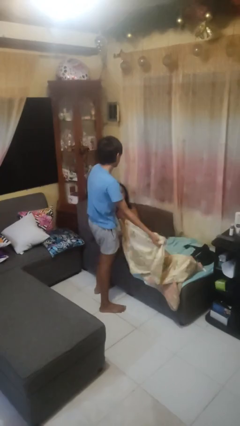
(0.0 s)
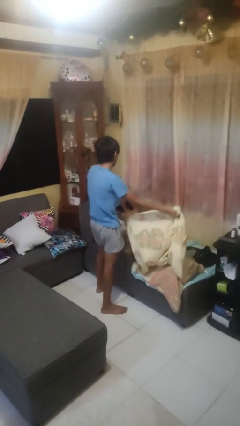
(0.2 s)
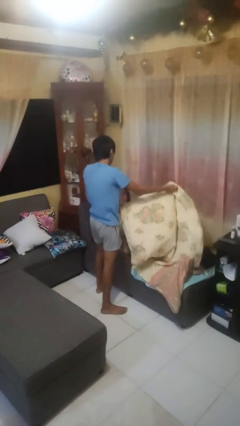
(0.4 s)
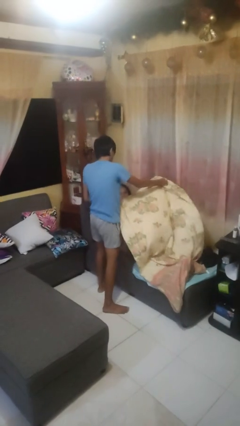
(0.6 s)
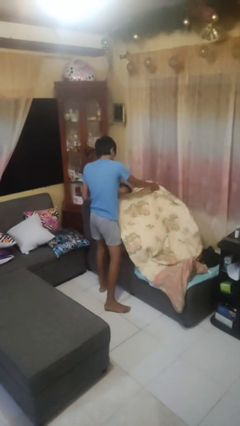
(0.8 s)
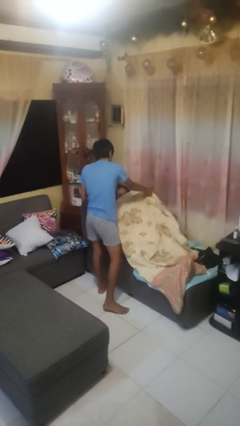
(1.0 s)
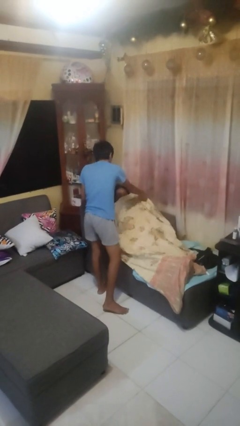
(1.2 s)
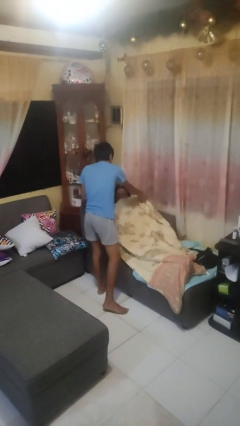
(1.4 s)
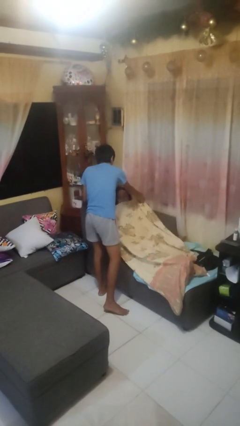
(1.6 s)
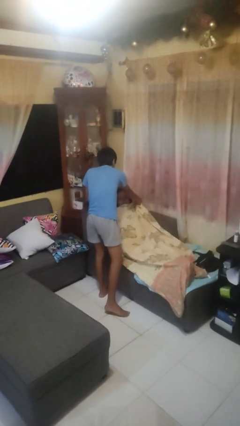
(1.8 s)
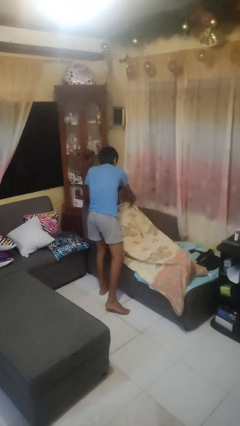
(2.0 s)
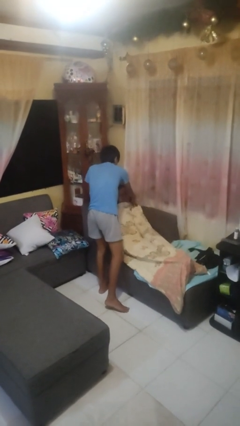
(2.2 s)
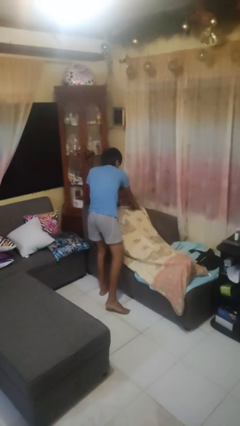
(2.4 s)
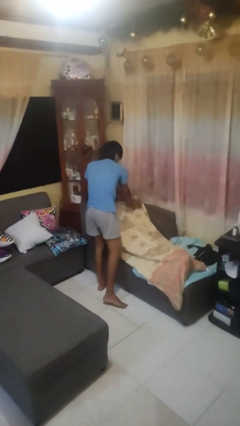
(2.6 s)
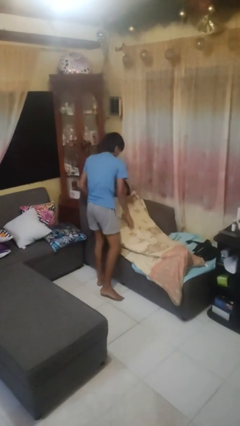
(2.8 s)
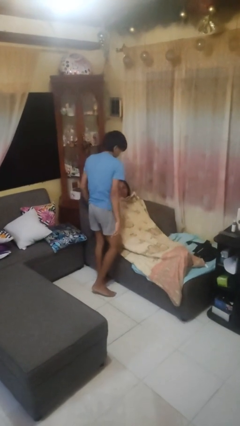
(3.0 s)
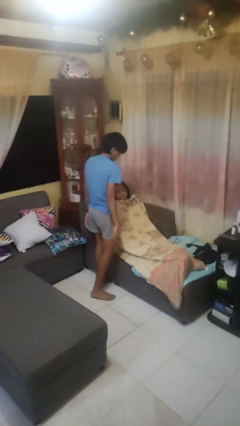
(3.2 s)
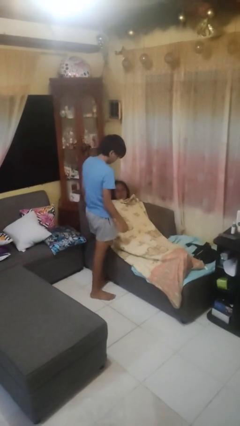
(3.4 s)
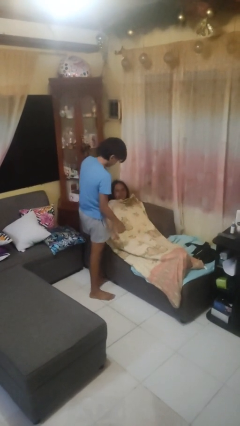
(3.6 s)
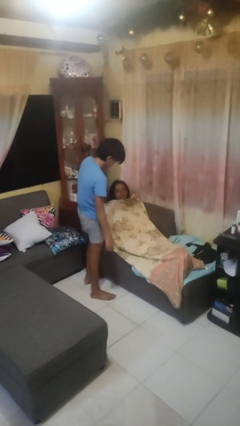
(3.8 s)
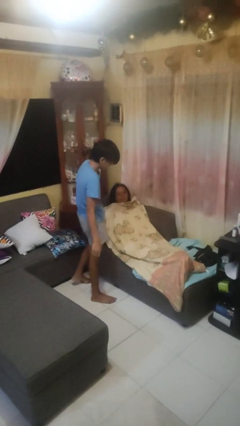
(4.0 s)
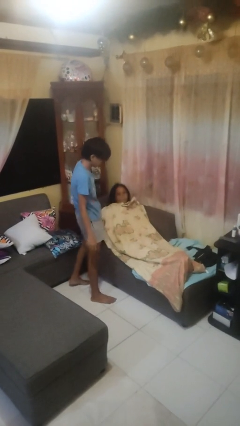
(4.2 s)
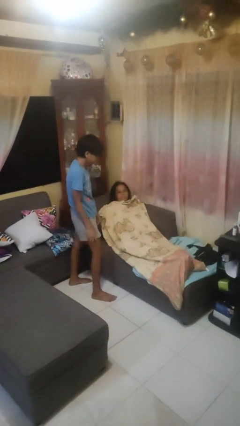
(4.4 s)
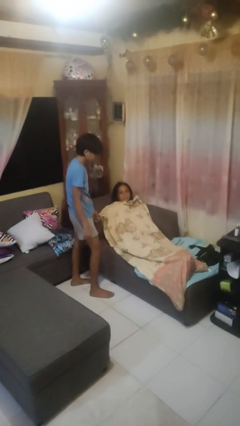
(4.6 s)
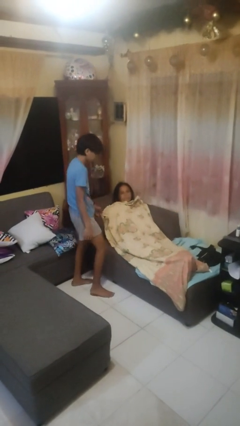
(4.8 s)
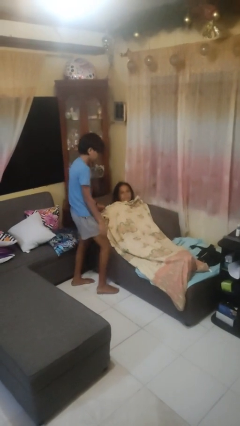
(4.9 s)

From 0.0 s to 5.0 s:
person covers friend with blanket

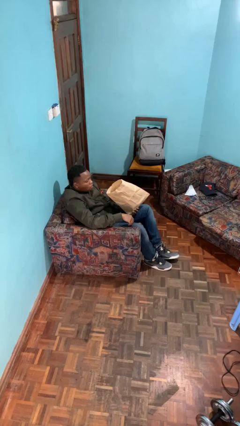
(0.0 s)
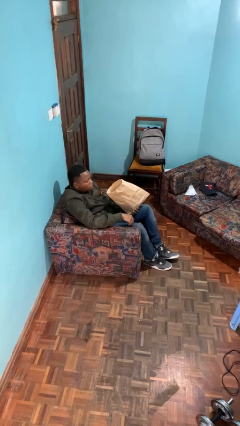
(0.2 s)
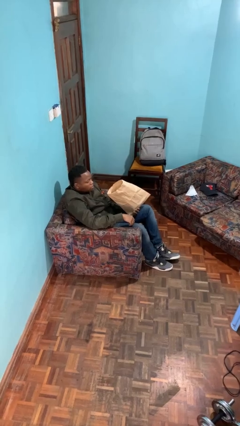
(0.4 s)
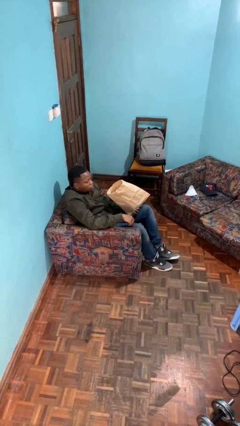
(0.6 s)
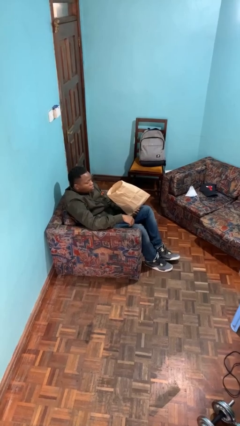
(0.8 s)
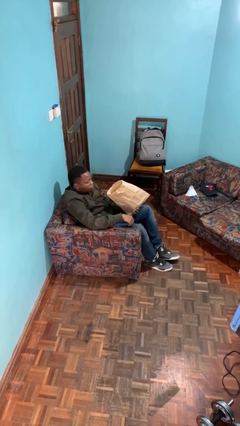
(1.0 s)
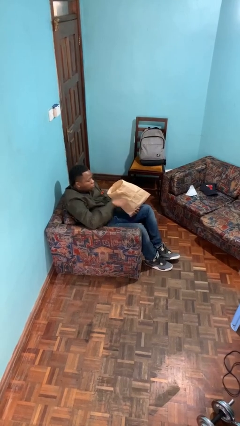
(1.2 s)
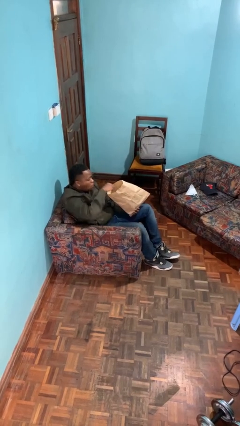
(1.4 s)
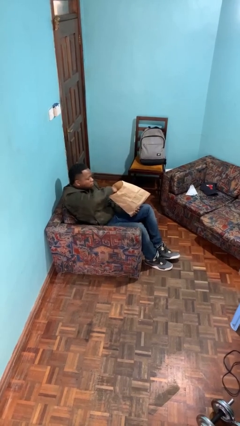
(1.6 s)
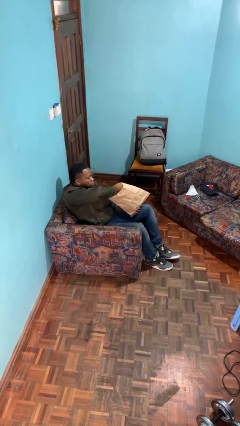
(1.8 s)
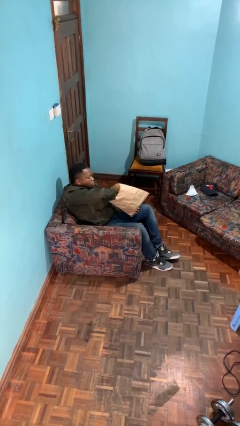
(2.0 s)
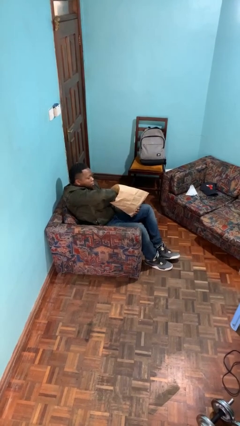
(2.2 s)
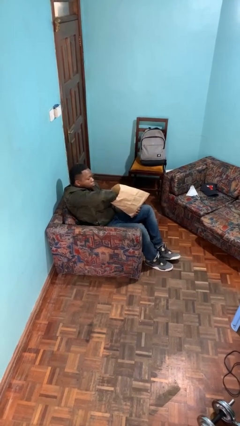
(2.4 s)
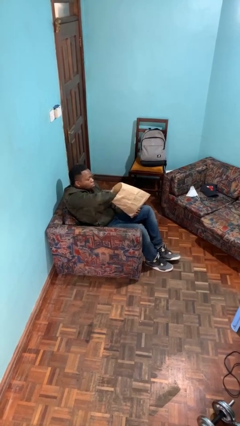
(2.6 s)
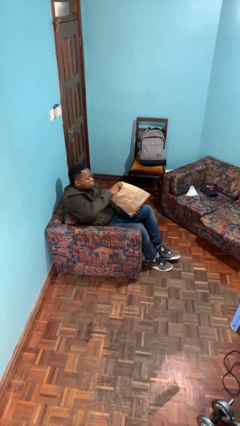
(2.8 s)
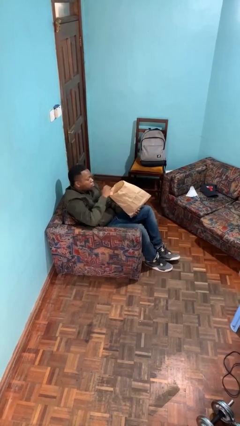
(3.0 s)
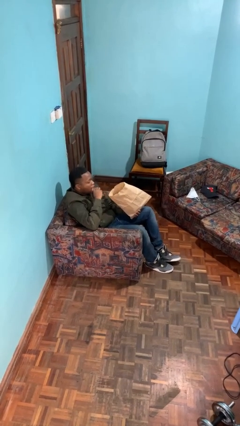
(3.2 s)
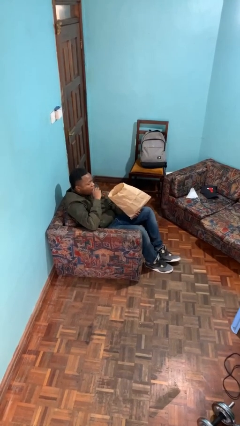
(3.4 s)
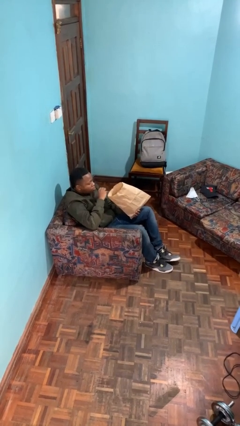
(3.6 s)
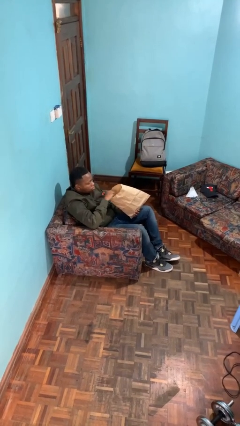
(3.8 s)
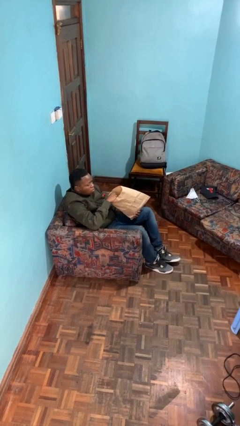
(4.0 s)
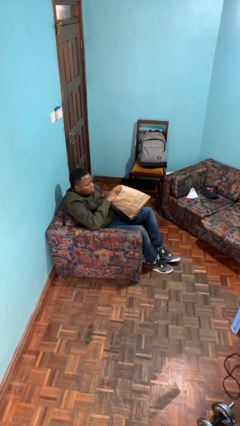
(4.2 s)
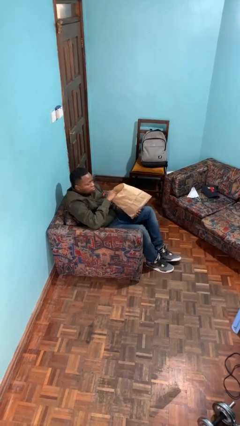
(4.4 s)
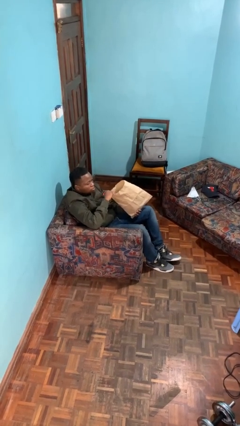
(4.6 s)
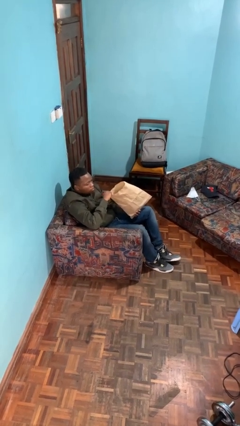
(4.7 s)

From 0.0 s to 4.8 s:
person eats snack from bag

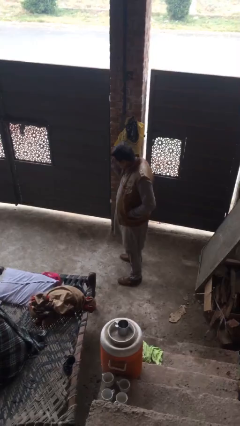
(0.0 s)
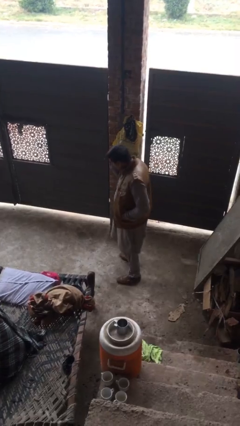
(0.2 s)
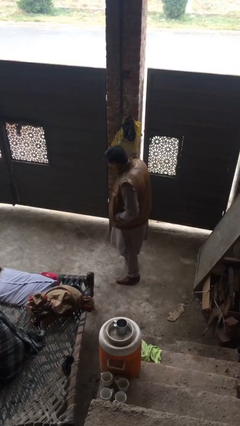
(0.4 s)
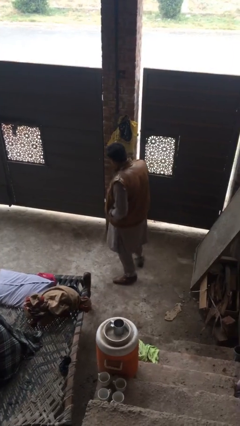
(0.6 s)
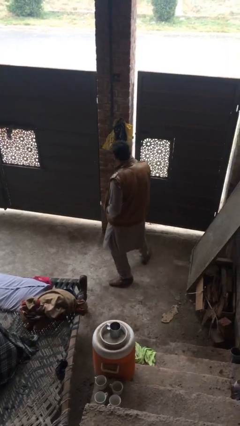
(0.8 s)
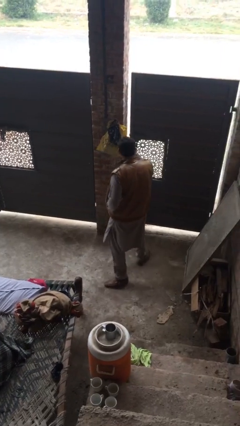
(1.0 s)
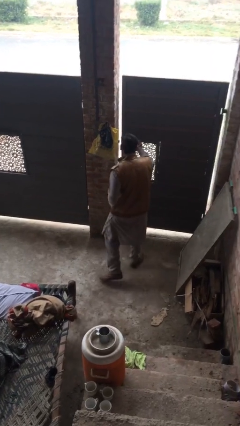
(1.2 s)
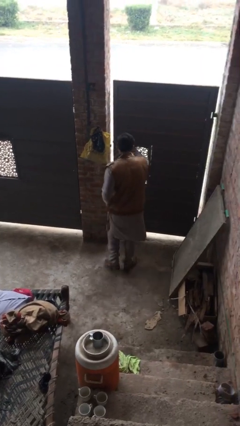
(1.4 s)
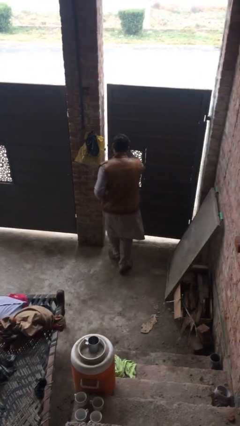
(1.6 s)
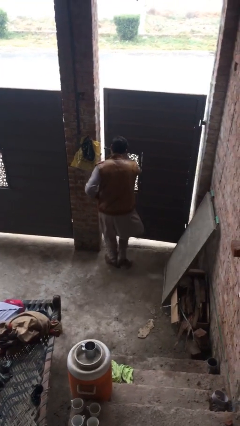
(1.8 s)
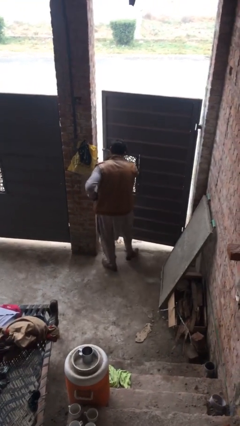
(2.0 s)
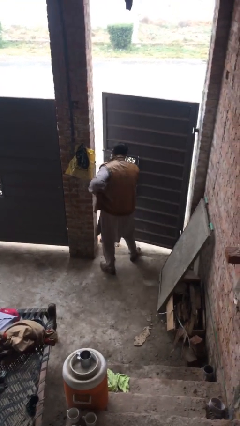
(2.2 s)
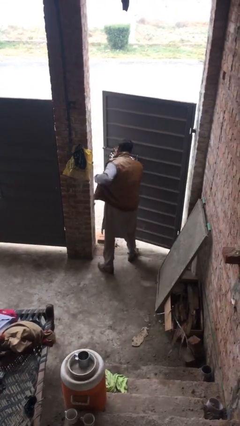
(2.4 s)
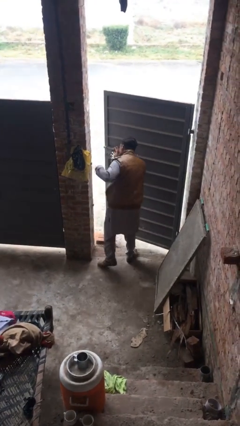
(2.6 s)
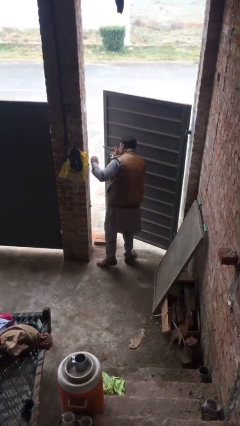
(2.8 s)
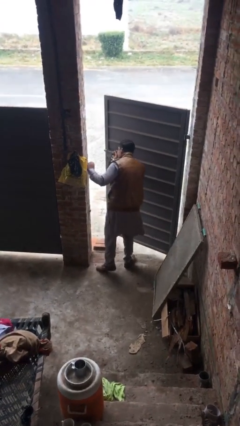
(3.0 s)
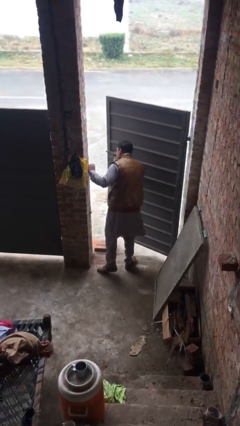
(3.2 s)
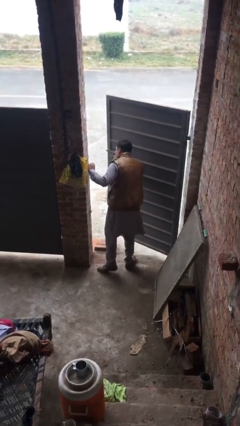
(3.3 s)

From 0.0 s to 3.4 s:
person opens facility door

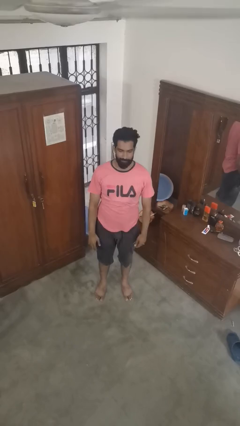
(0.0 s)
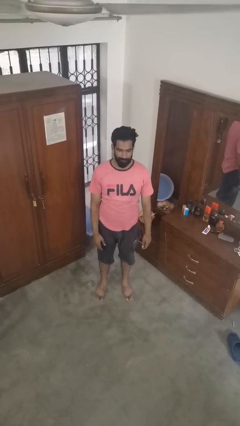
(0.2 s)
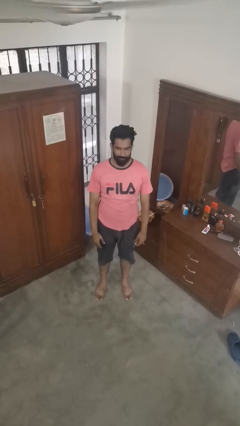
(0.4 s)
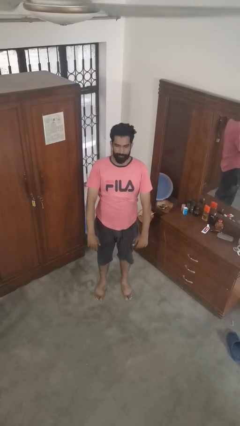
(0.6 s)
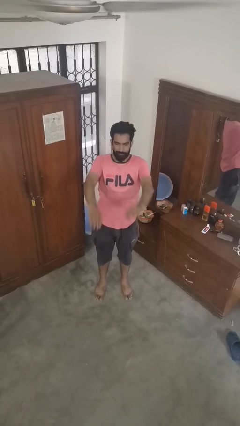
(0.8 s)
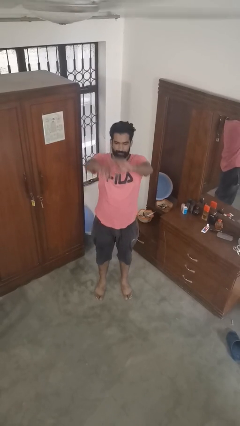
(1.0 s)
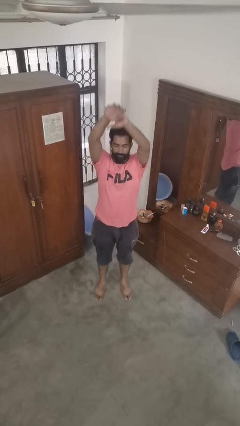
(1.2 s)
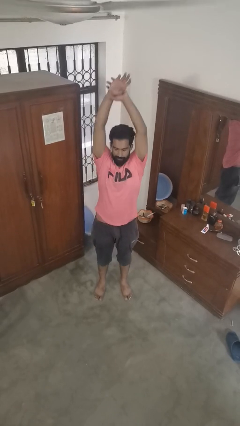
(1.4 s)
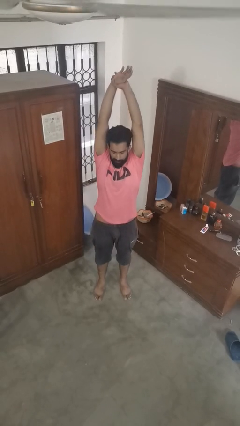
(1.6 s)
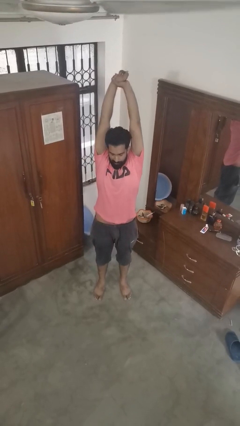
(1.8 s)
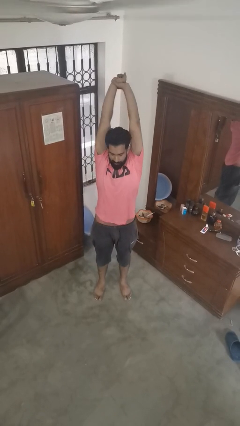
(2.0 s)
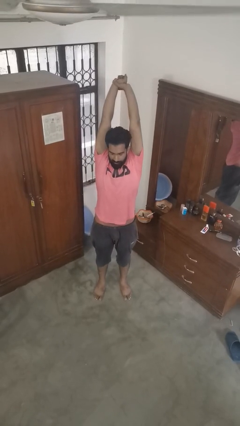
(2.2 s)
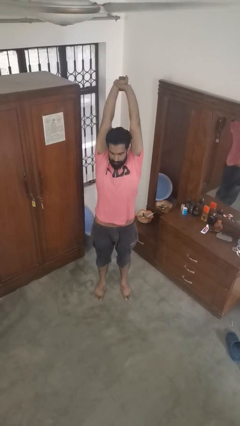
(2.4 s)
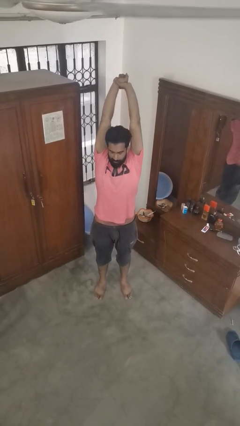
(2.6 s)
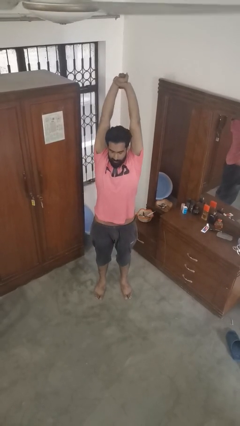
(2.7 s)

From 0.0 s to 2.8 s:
person stretches arms over head

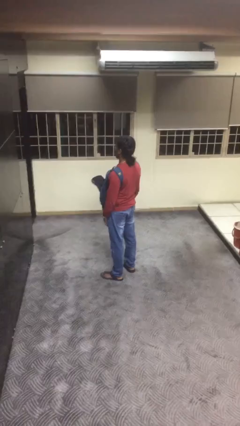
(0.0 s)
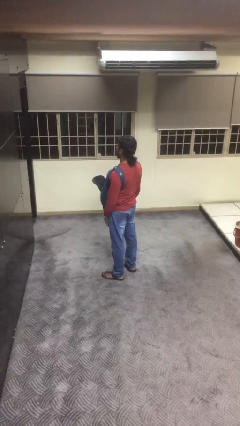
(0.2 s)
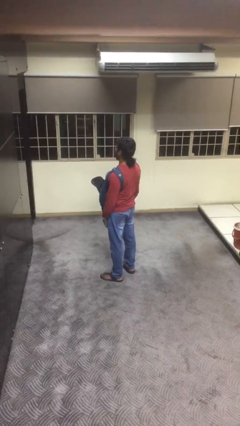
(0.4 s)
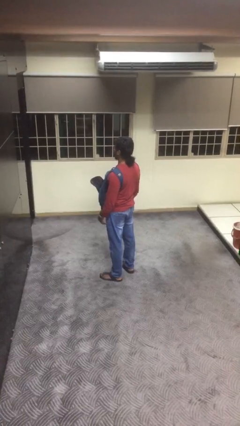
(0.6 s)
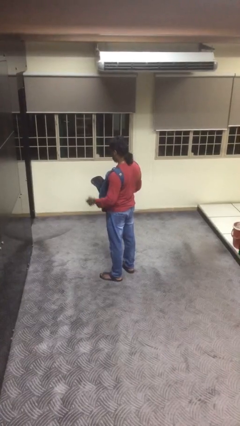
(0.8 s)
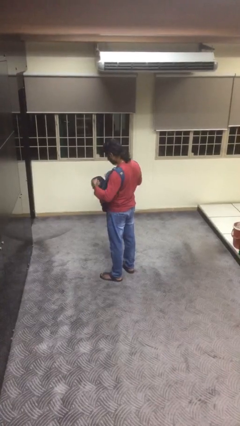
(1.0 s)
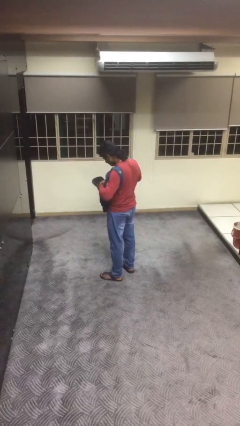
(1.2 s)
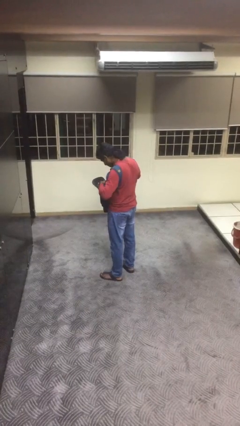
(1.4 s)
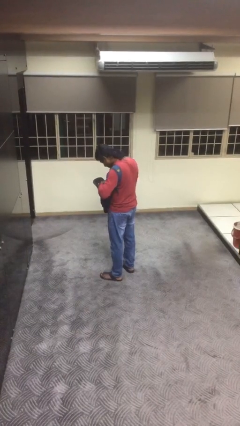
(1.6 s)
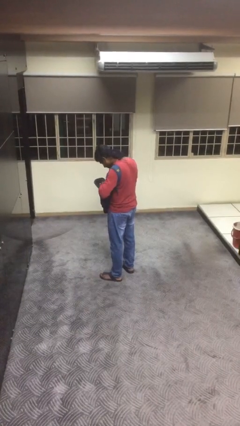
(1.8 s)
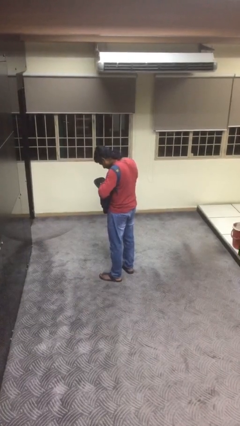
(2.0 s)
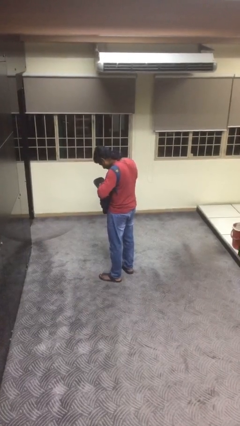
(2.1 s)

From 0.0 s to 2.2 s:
person searches in backpack
